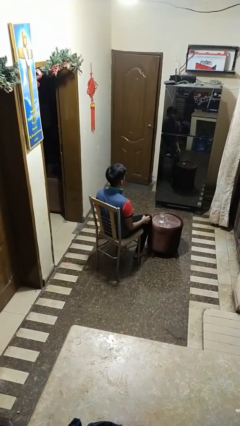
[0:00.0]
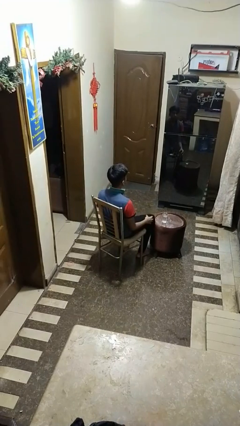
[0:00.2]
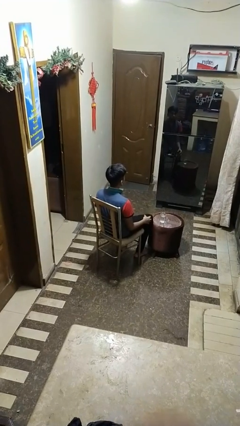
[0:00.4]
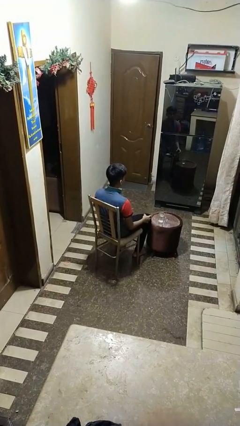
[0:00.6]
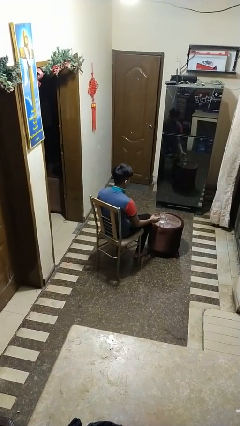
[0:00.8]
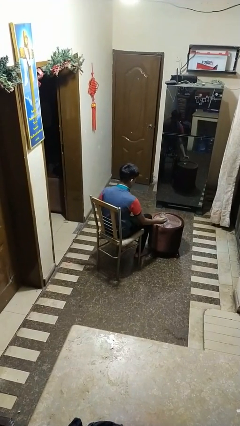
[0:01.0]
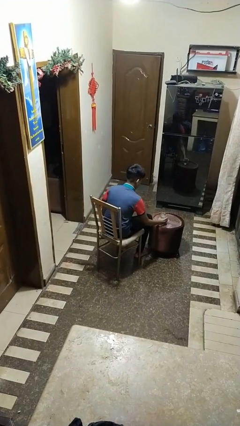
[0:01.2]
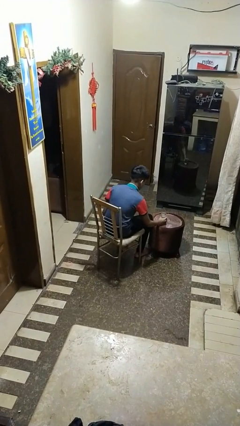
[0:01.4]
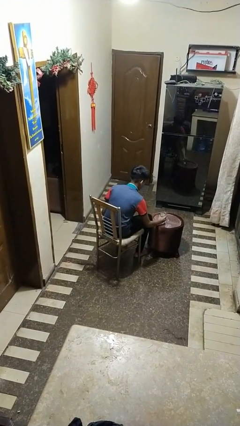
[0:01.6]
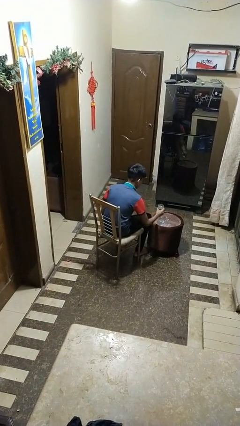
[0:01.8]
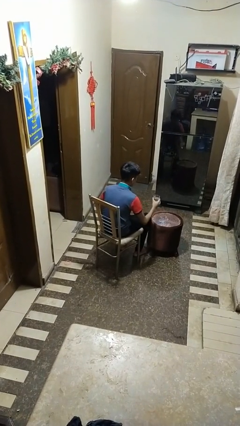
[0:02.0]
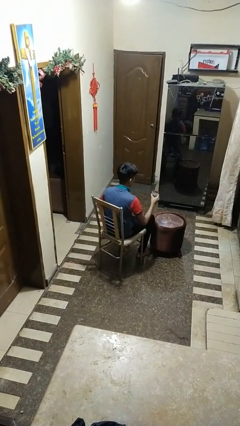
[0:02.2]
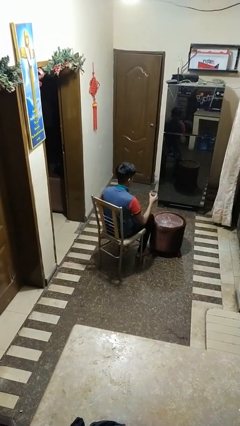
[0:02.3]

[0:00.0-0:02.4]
person picks up object from table

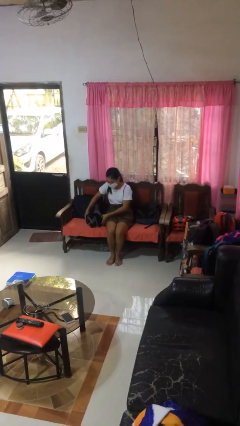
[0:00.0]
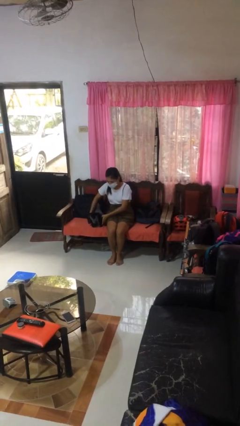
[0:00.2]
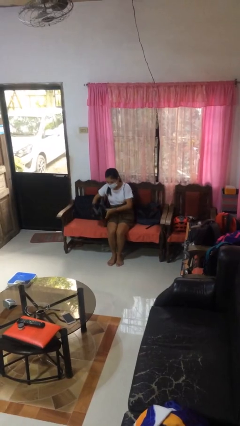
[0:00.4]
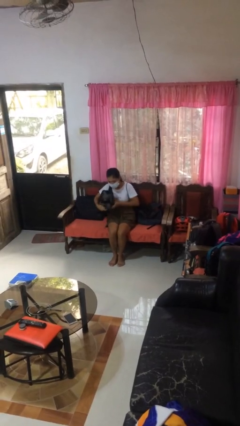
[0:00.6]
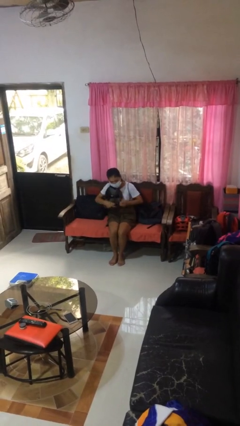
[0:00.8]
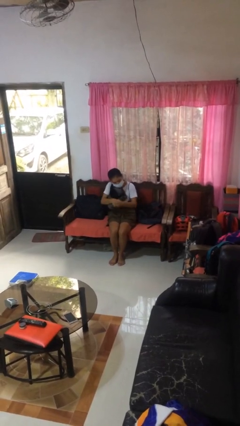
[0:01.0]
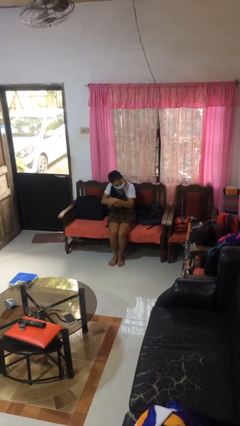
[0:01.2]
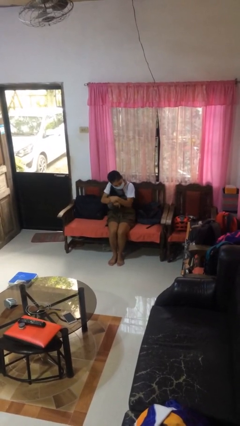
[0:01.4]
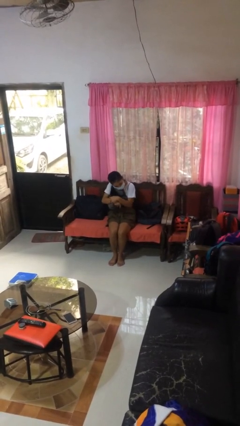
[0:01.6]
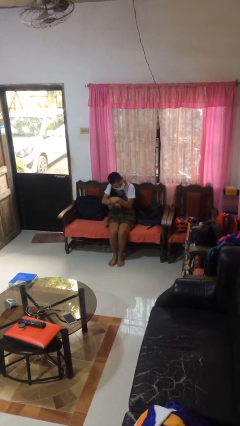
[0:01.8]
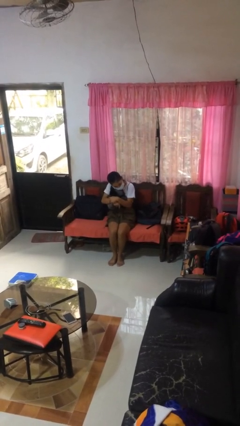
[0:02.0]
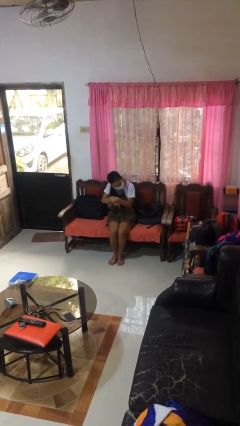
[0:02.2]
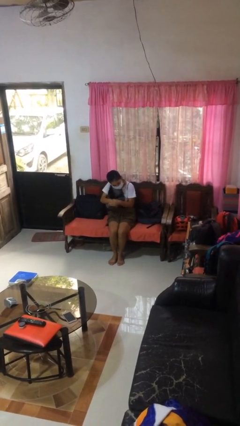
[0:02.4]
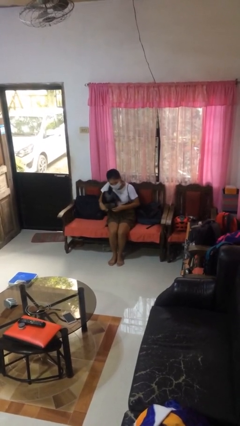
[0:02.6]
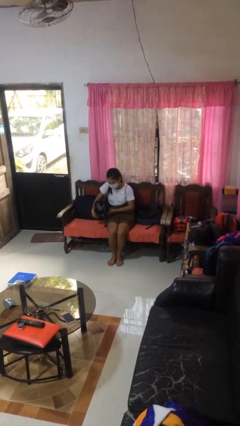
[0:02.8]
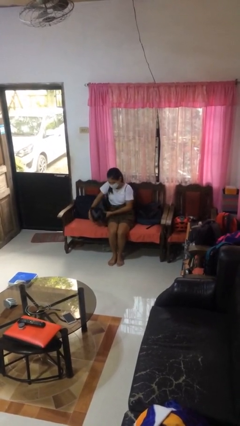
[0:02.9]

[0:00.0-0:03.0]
person hugs stuffed animal

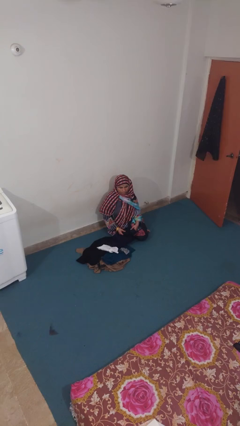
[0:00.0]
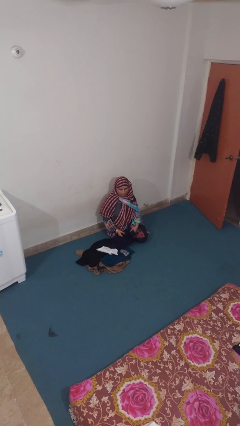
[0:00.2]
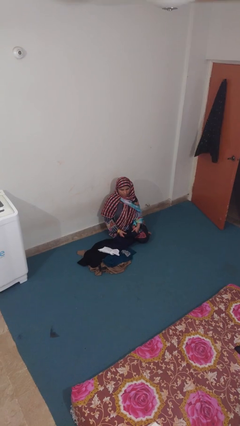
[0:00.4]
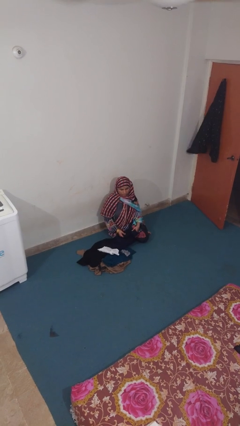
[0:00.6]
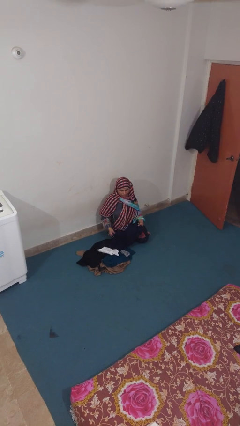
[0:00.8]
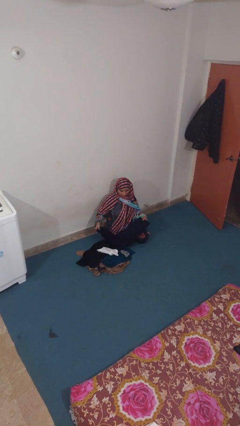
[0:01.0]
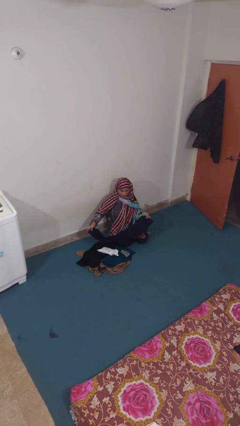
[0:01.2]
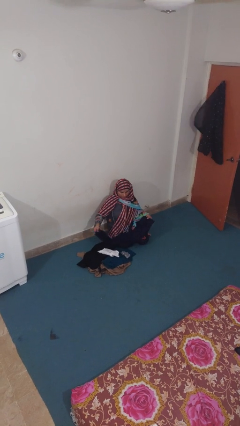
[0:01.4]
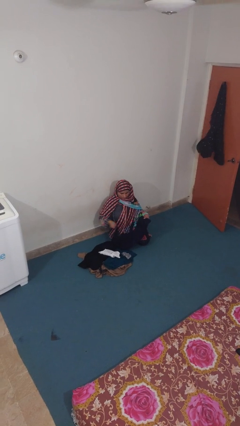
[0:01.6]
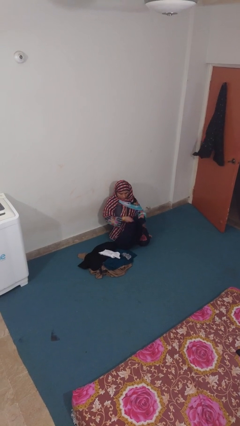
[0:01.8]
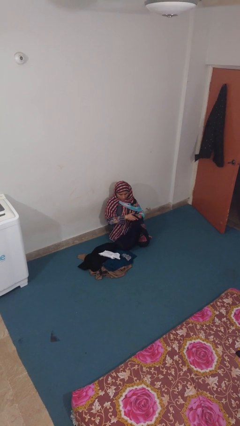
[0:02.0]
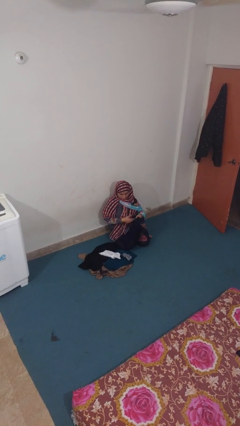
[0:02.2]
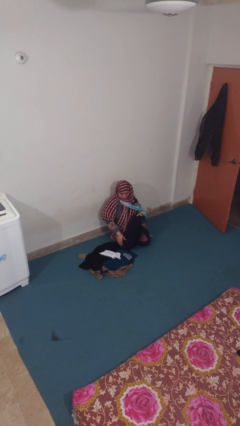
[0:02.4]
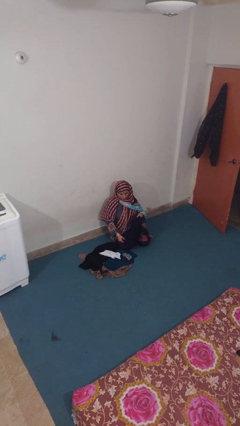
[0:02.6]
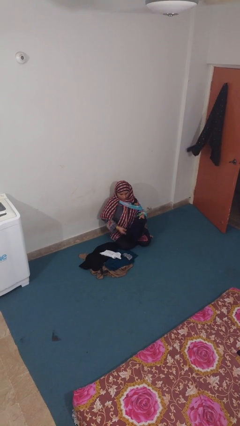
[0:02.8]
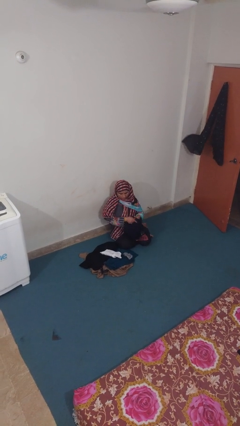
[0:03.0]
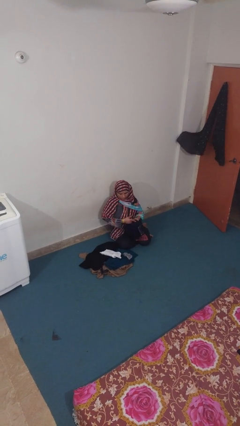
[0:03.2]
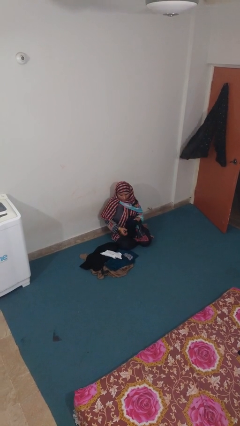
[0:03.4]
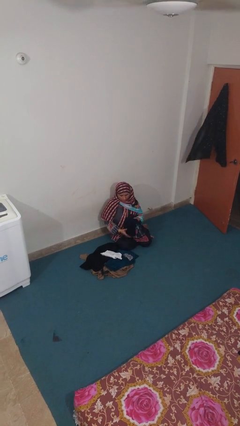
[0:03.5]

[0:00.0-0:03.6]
person folds pants

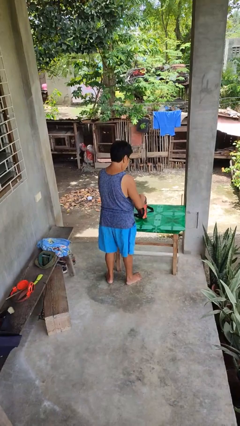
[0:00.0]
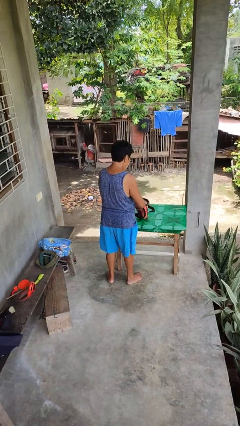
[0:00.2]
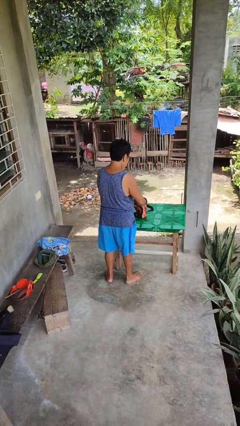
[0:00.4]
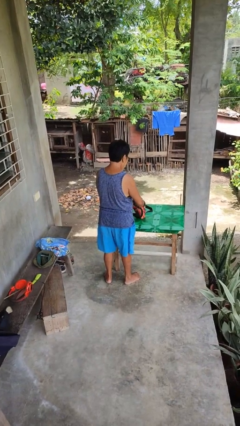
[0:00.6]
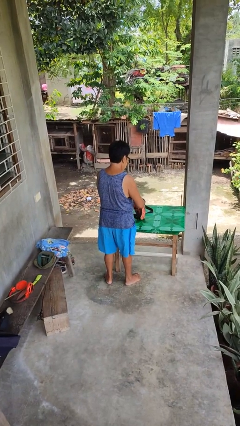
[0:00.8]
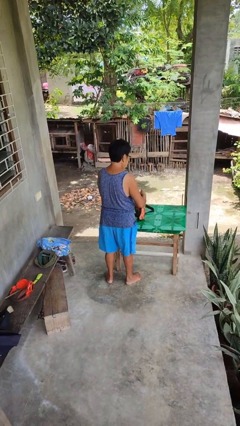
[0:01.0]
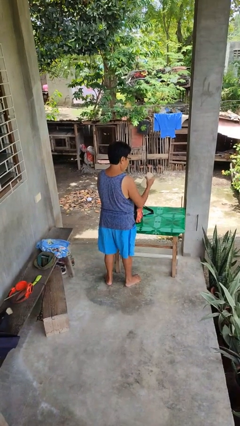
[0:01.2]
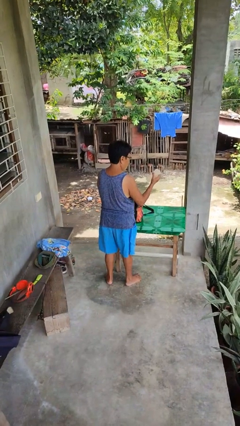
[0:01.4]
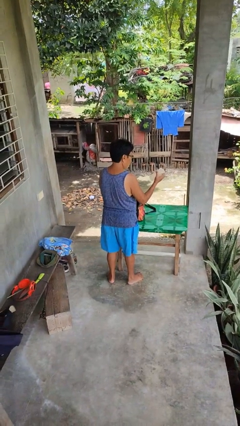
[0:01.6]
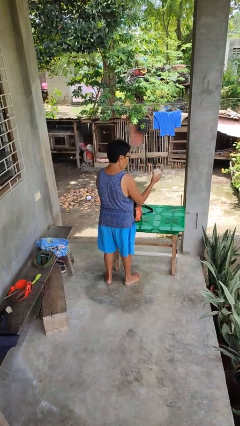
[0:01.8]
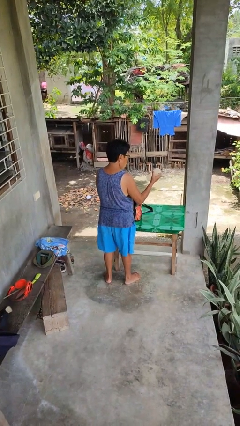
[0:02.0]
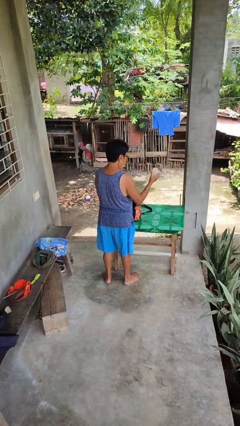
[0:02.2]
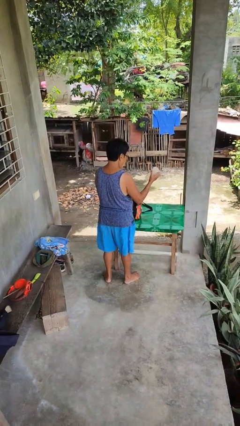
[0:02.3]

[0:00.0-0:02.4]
person takes object from purse

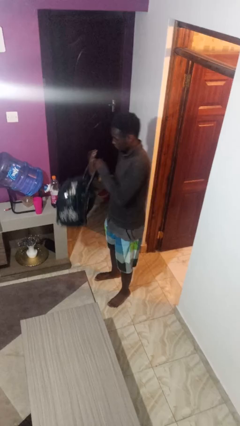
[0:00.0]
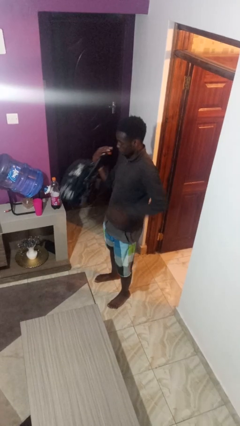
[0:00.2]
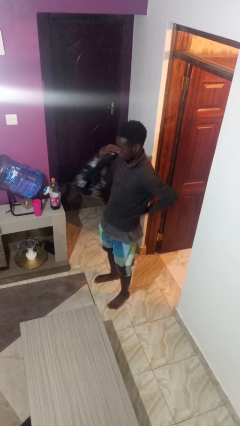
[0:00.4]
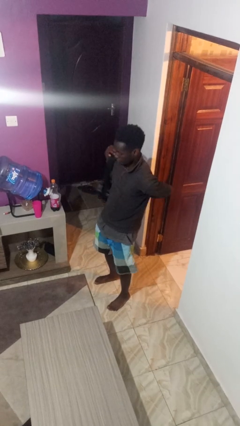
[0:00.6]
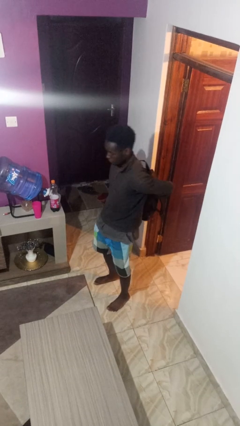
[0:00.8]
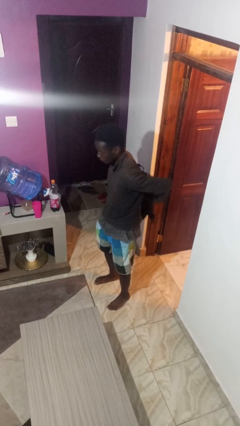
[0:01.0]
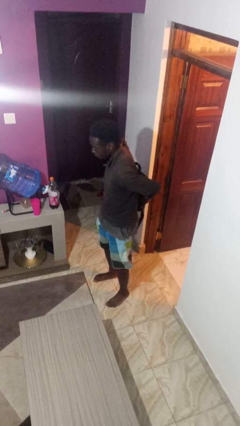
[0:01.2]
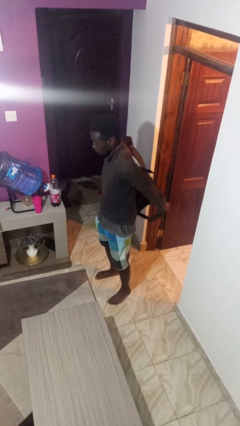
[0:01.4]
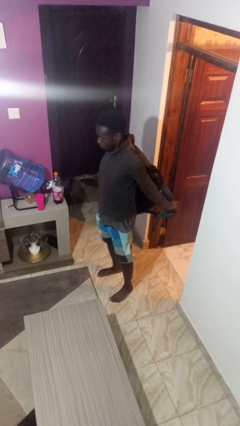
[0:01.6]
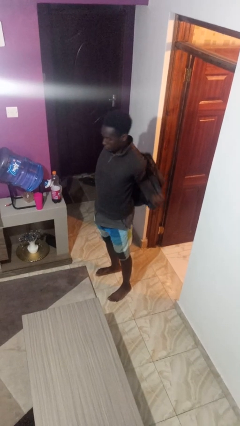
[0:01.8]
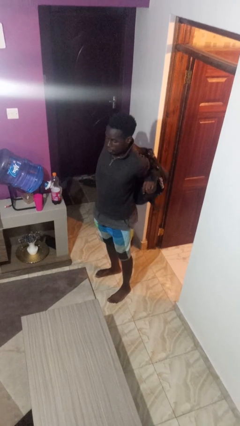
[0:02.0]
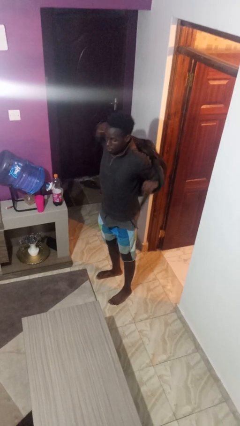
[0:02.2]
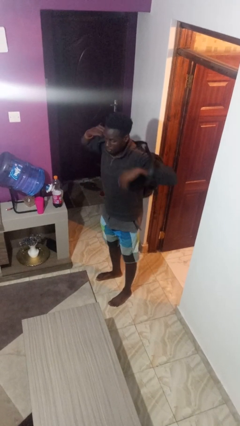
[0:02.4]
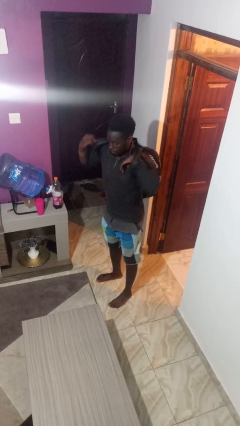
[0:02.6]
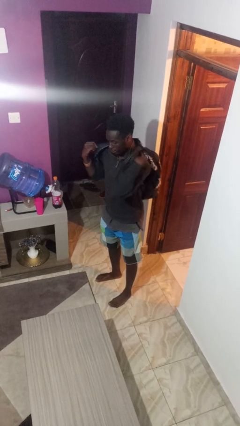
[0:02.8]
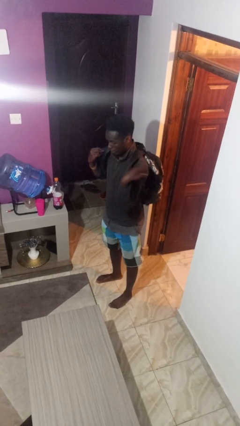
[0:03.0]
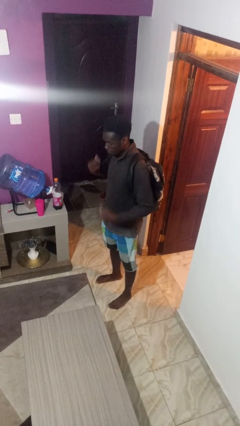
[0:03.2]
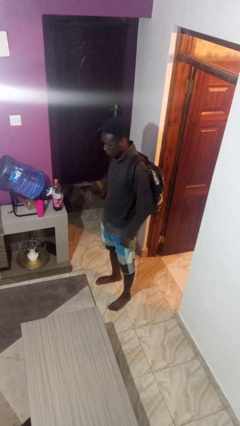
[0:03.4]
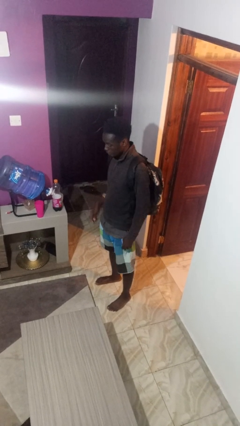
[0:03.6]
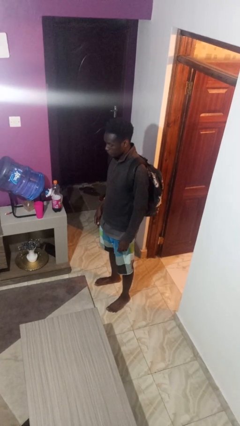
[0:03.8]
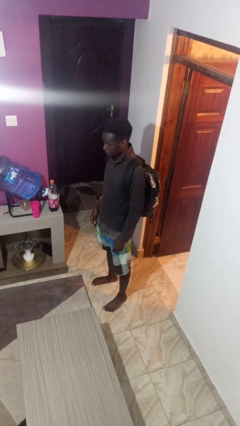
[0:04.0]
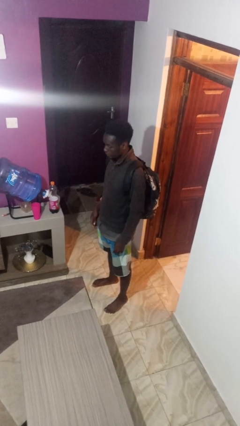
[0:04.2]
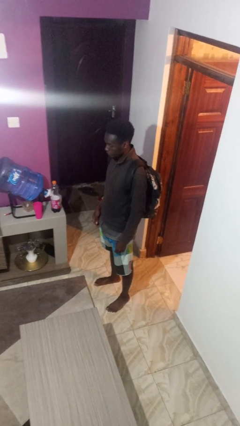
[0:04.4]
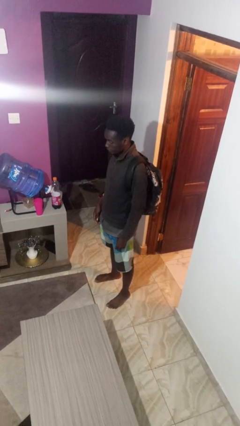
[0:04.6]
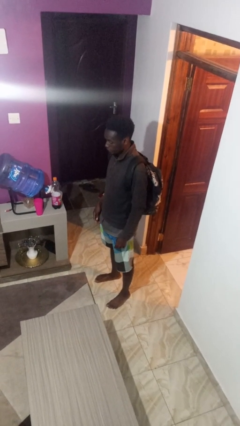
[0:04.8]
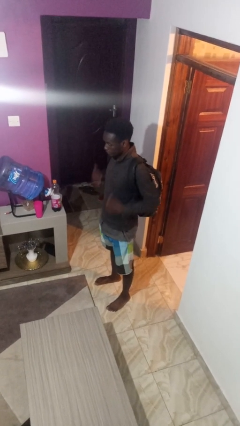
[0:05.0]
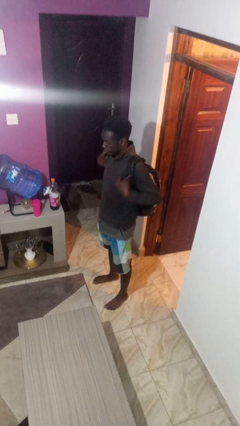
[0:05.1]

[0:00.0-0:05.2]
person puts on backpack

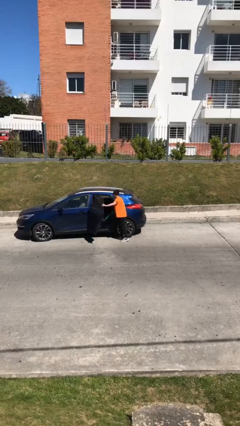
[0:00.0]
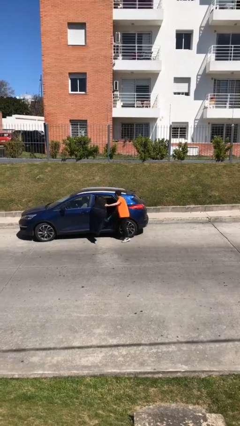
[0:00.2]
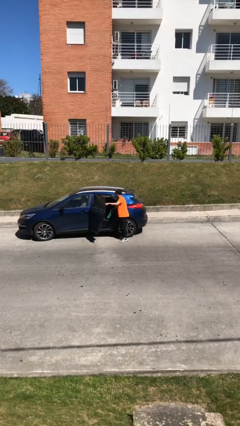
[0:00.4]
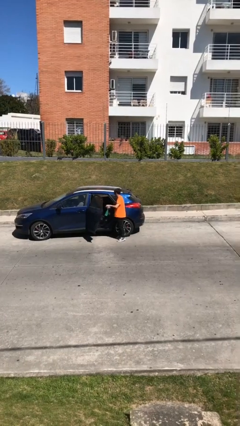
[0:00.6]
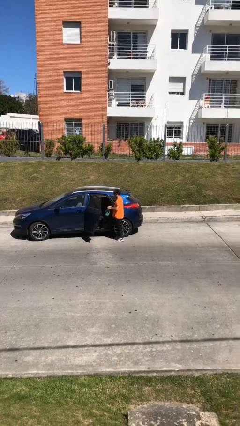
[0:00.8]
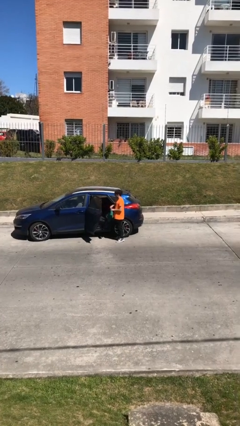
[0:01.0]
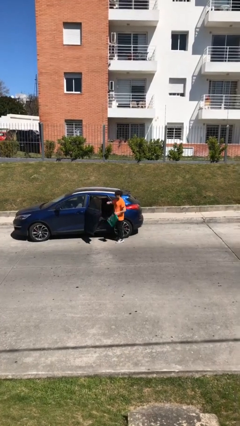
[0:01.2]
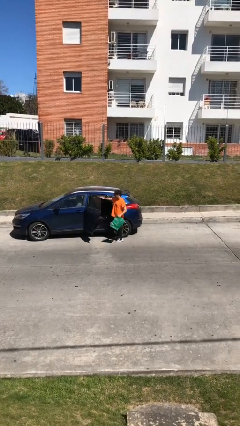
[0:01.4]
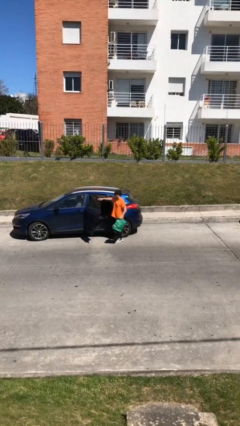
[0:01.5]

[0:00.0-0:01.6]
person unloads car
